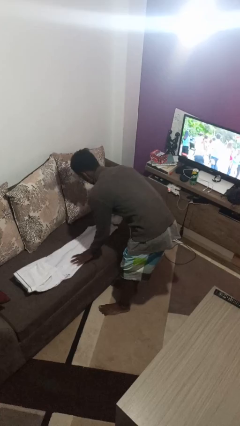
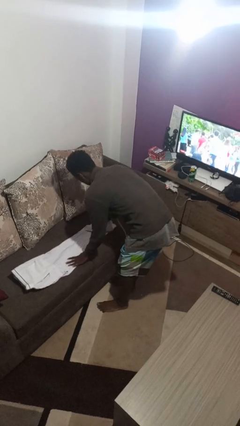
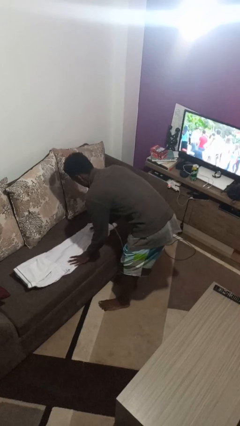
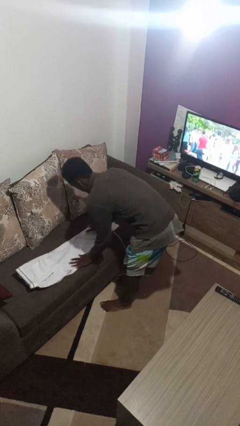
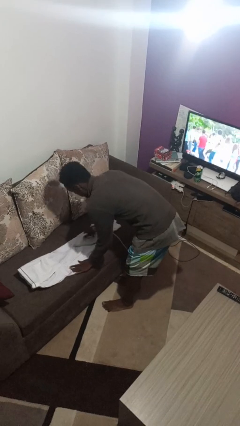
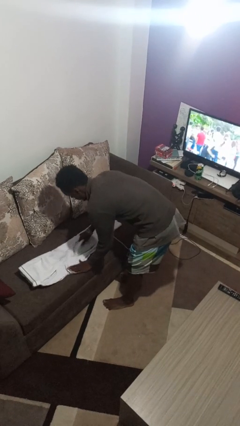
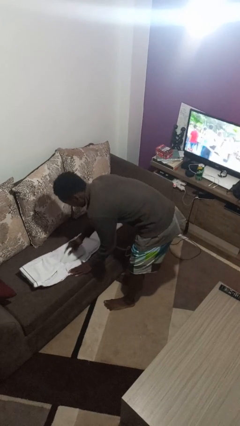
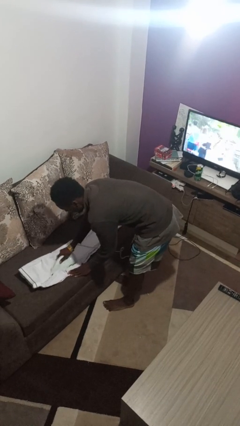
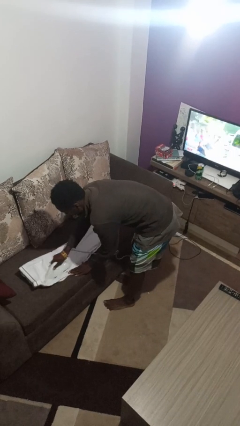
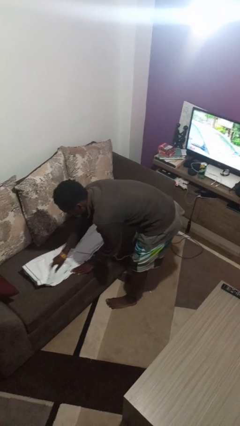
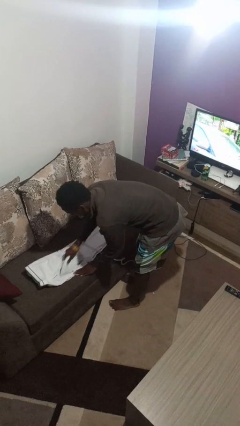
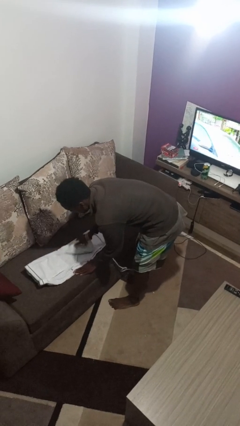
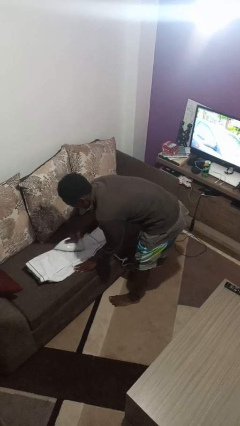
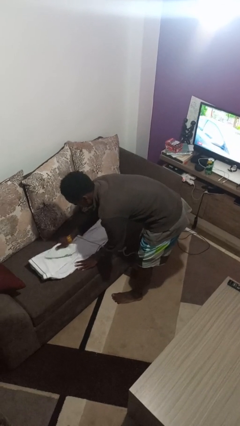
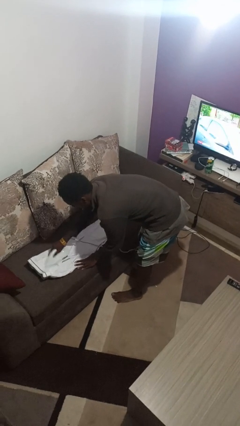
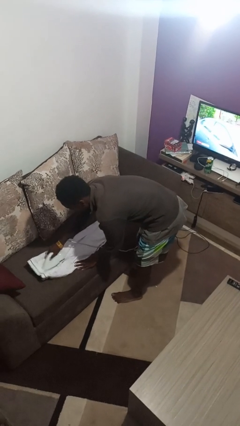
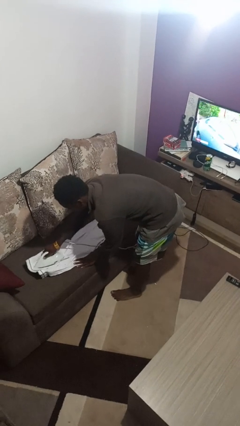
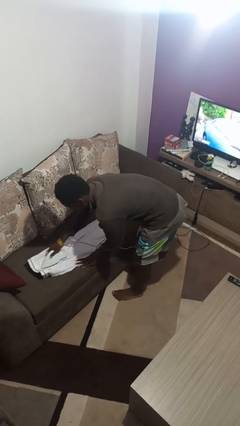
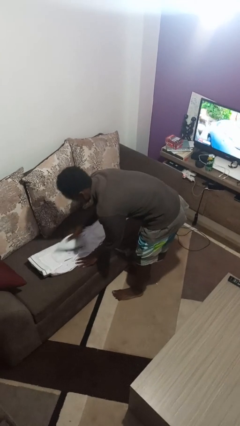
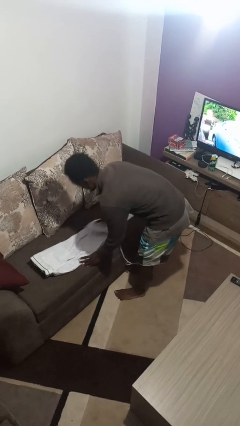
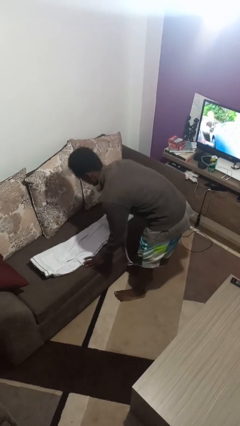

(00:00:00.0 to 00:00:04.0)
person irons clothes

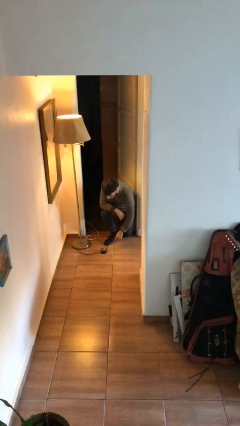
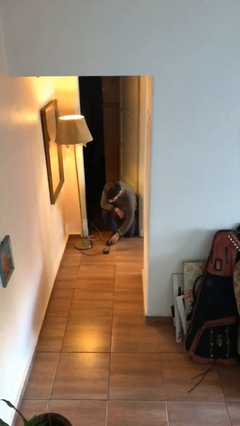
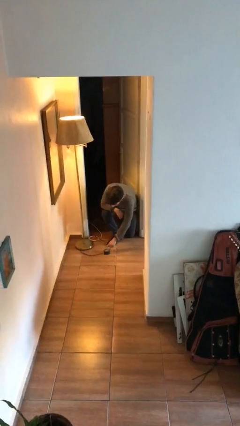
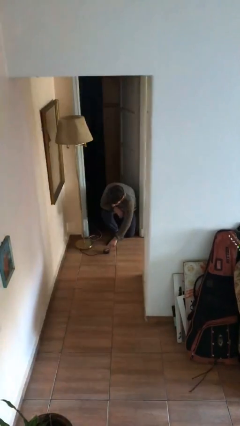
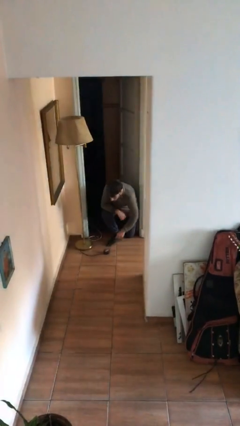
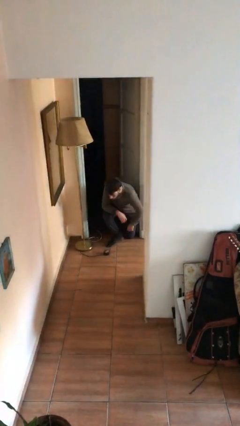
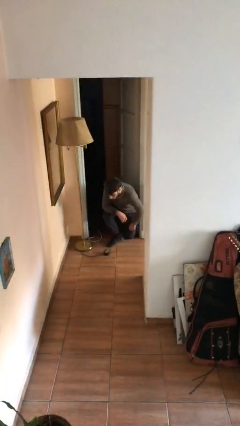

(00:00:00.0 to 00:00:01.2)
person turns off lamp

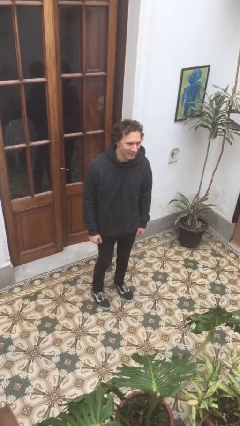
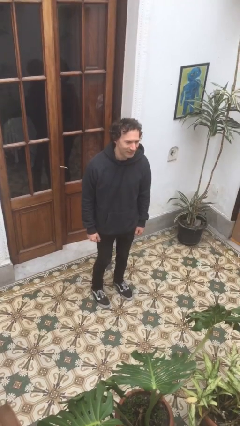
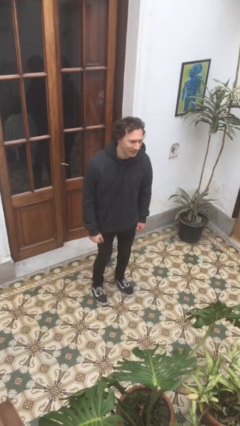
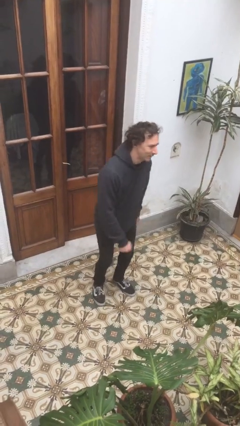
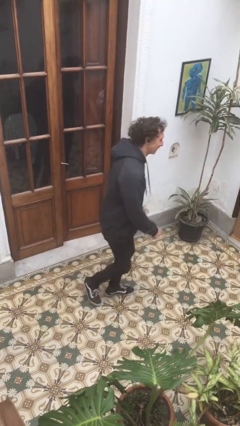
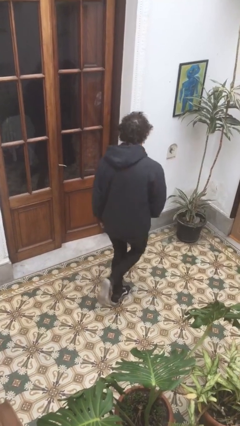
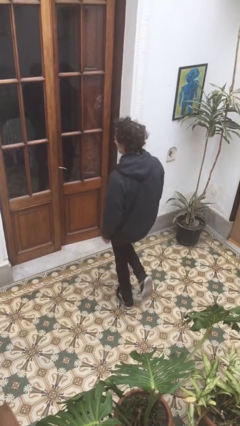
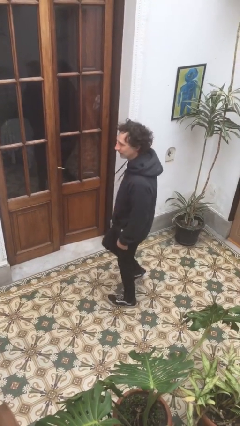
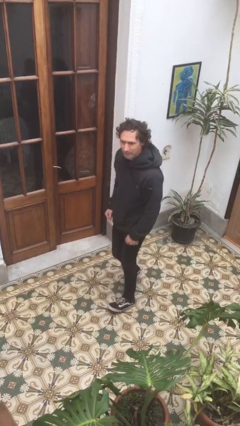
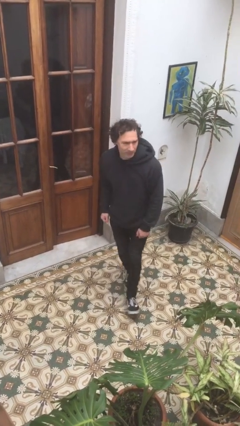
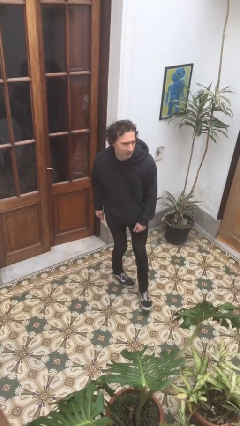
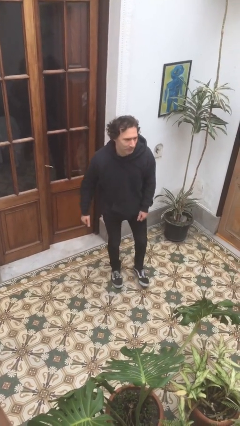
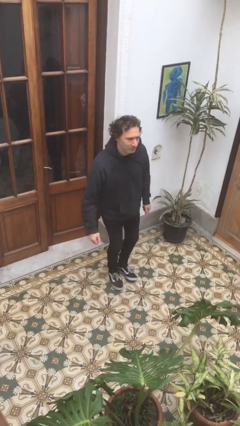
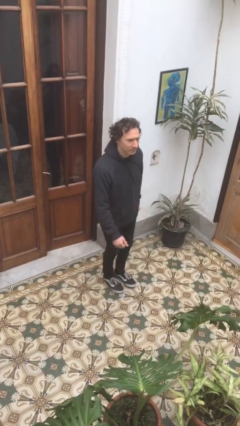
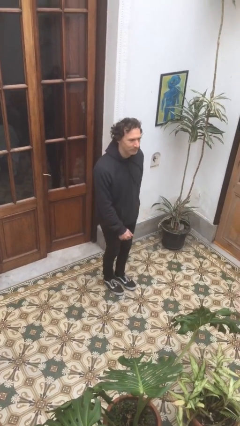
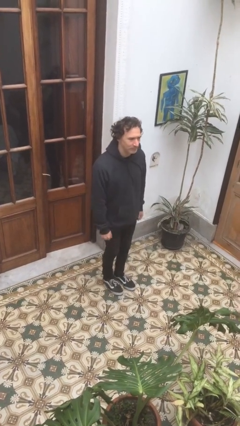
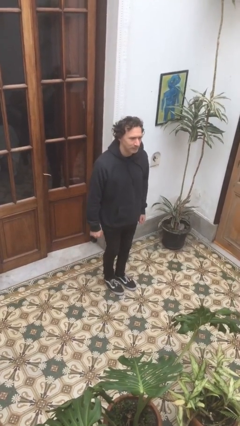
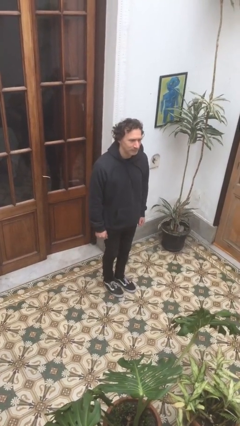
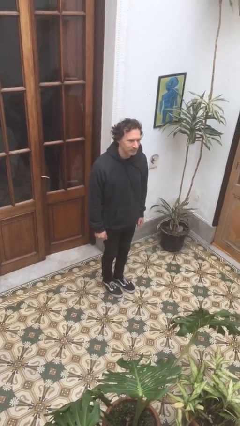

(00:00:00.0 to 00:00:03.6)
person twirls

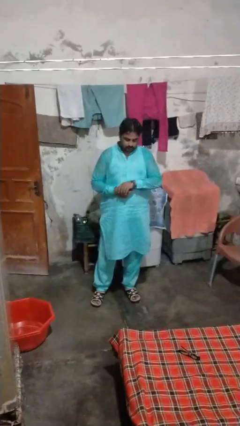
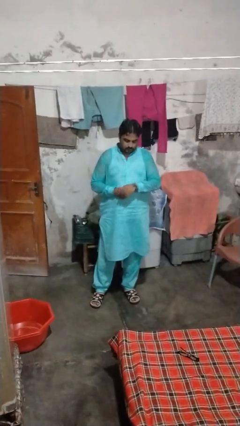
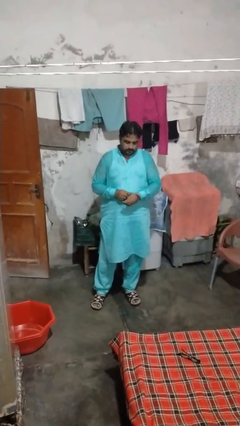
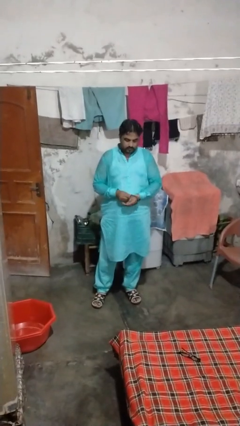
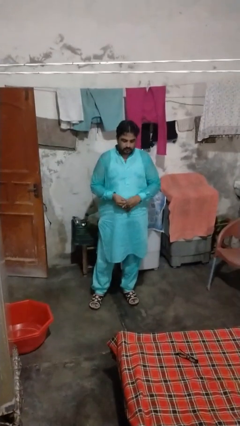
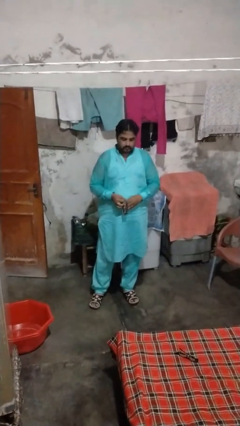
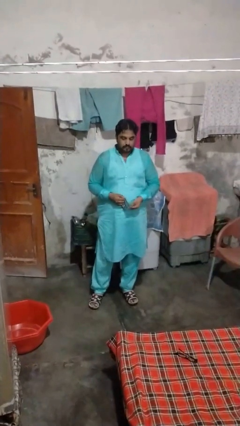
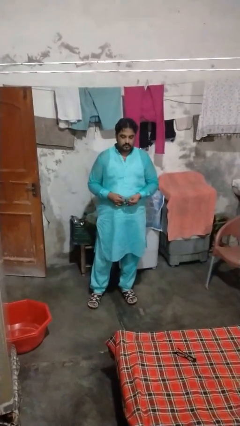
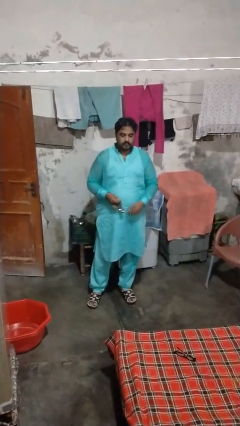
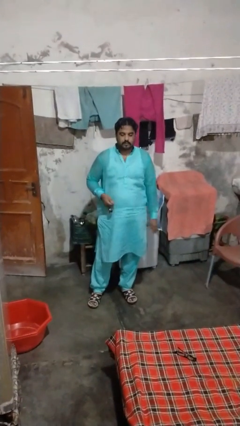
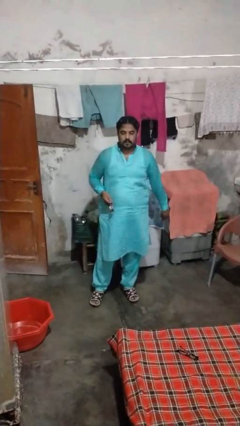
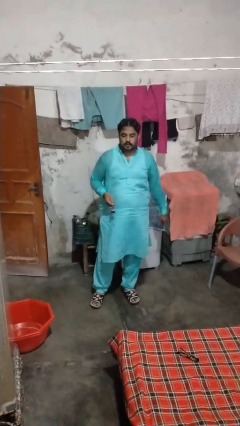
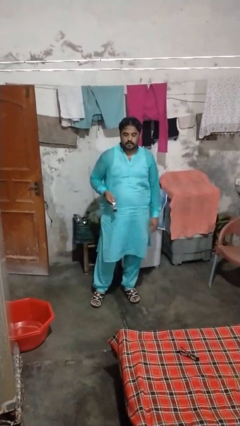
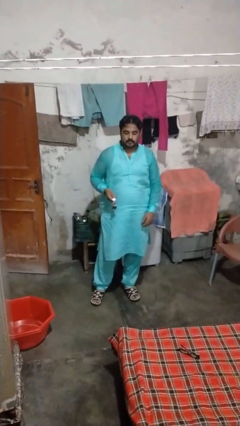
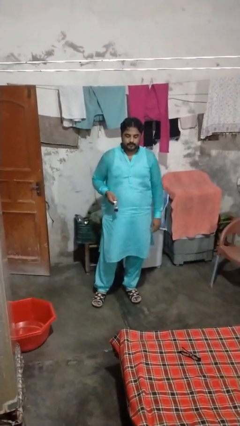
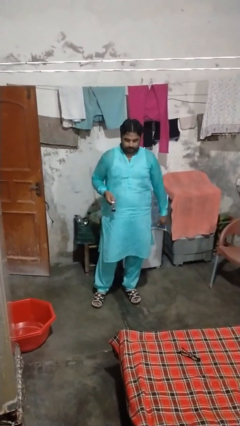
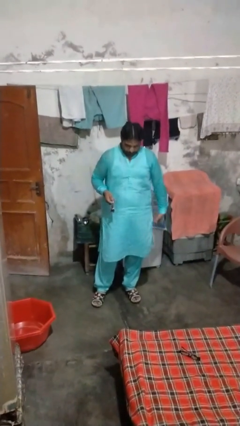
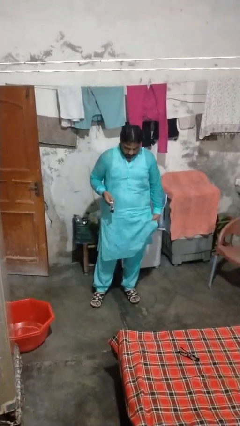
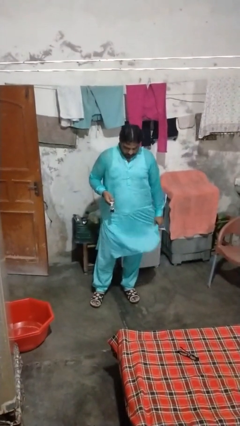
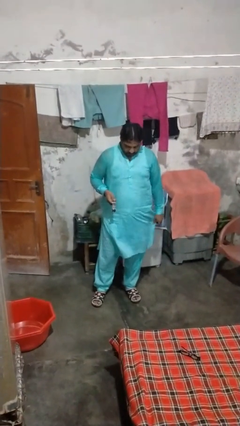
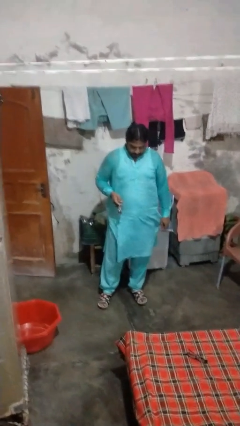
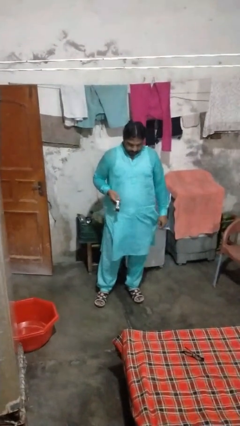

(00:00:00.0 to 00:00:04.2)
person takes off wristwatch

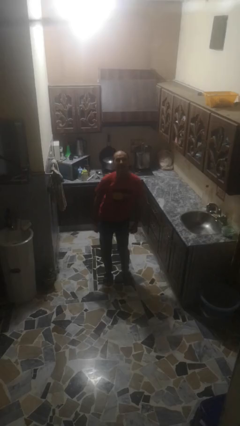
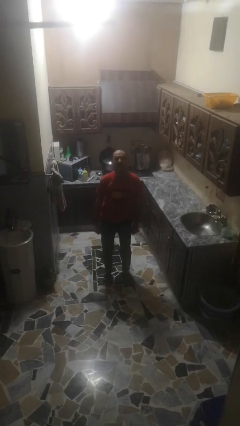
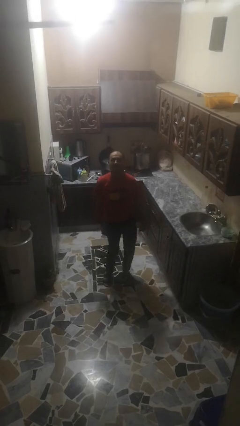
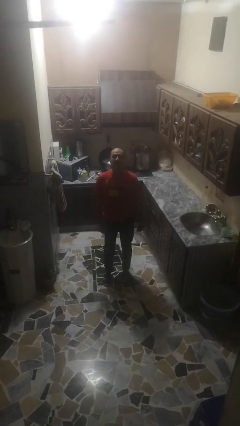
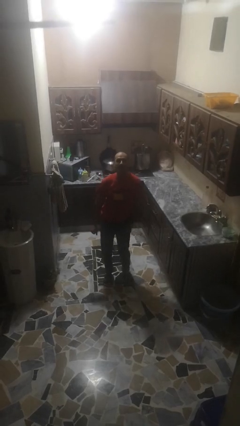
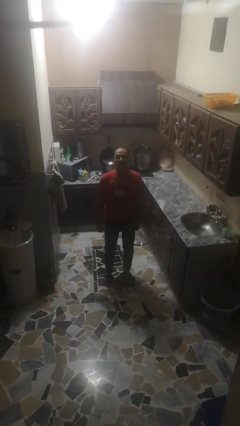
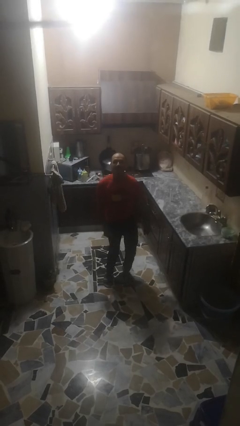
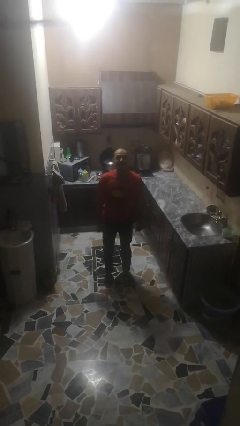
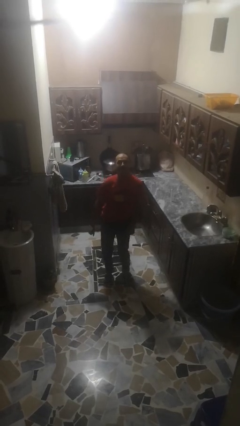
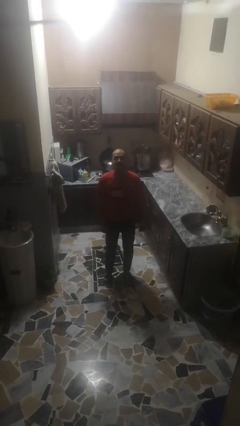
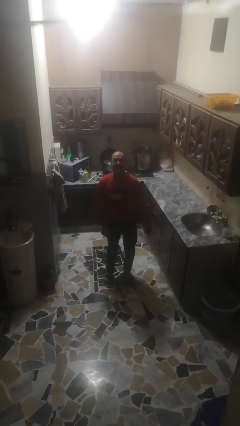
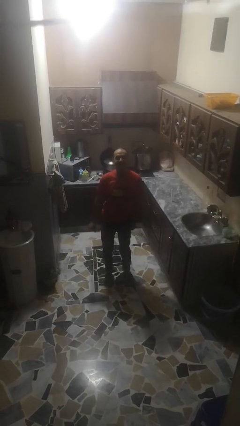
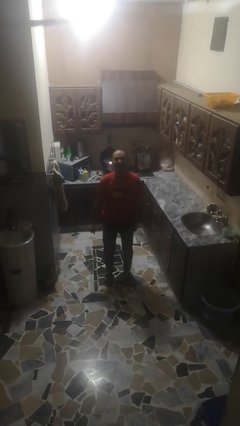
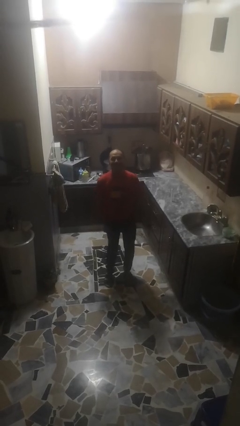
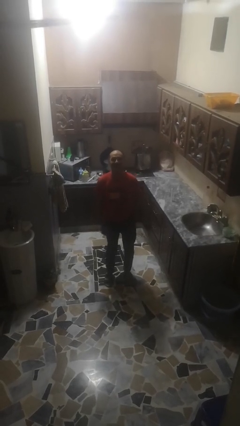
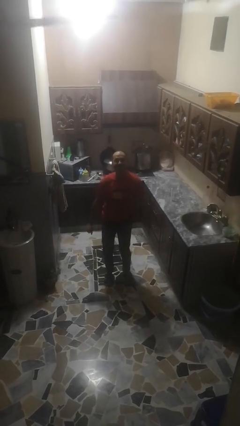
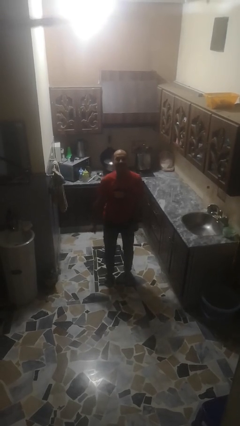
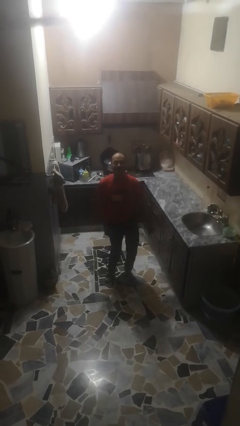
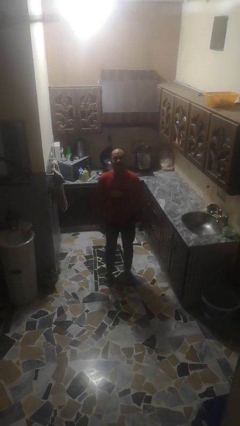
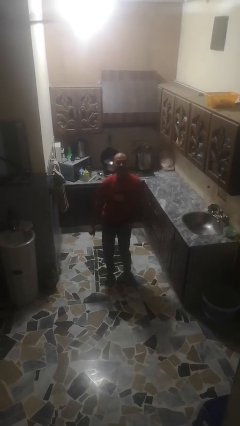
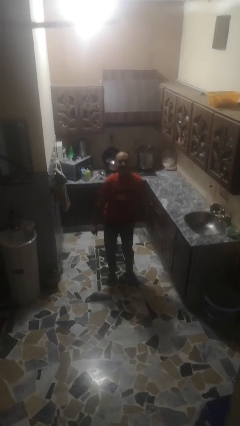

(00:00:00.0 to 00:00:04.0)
person wiggles hips

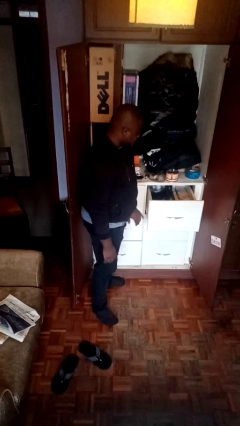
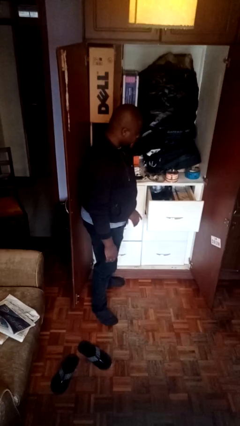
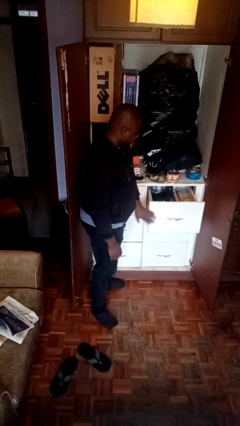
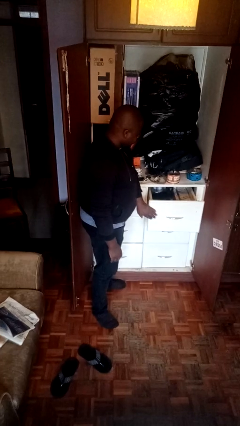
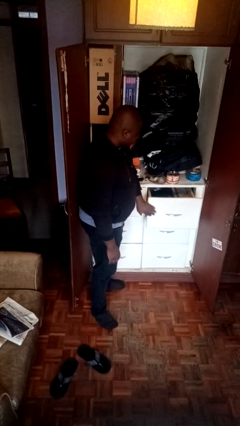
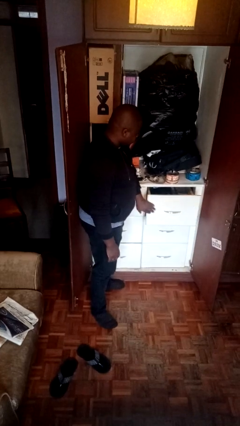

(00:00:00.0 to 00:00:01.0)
person opens dresser drawer
